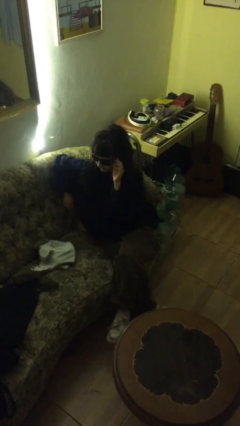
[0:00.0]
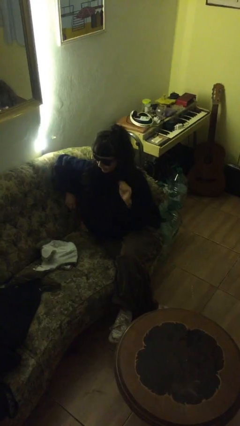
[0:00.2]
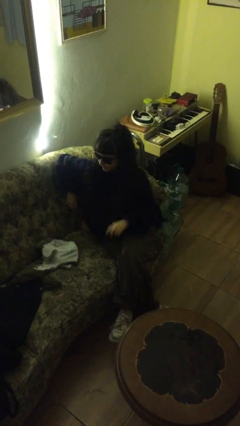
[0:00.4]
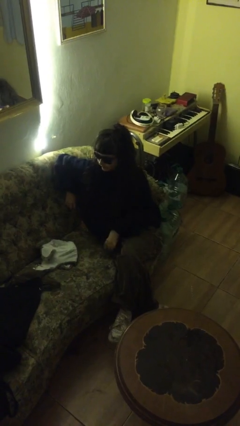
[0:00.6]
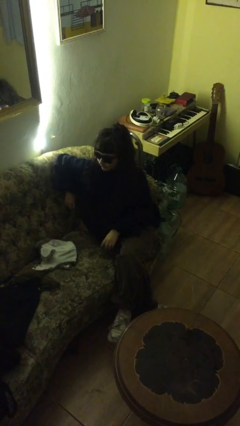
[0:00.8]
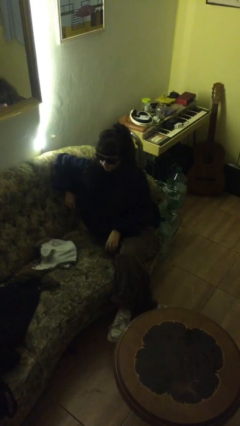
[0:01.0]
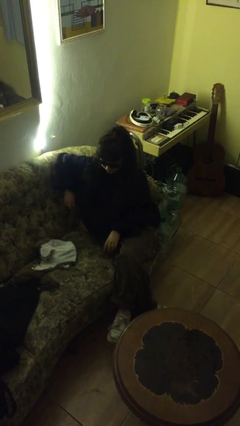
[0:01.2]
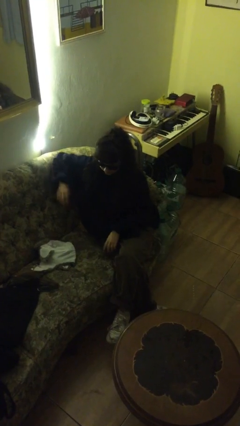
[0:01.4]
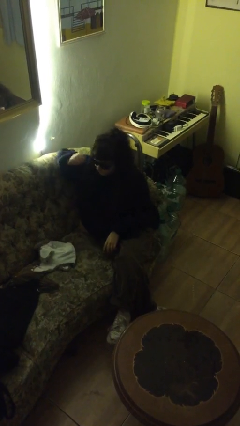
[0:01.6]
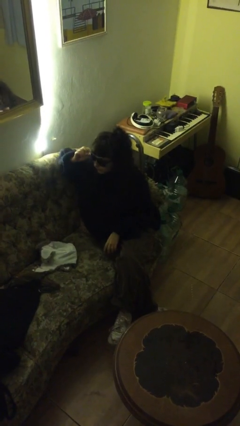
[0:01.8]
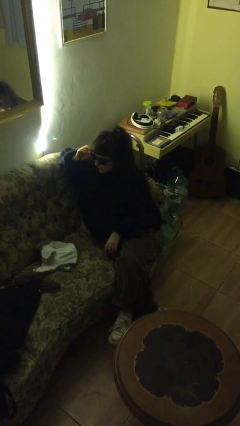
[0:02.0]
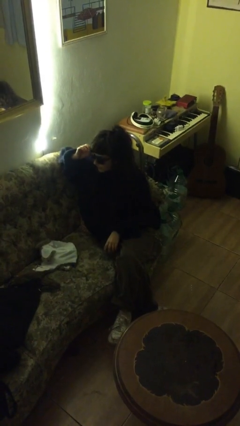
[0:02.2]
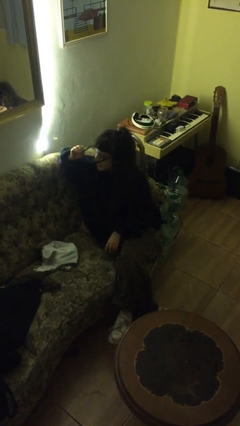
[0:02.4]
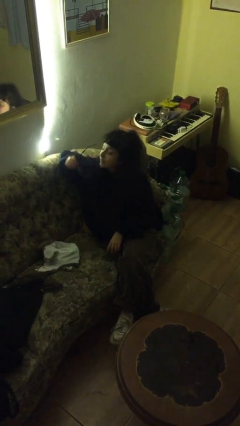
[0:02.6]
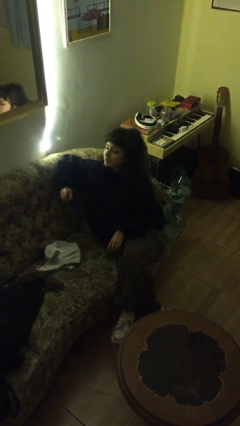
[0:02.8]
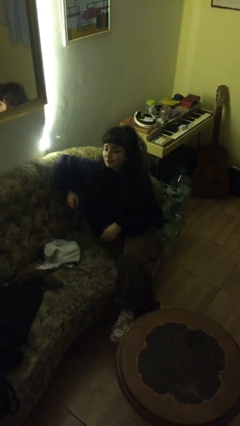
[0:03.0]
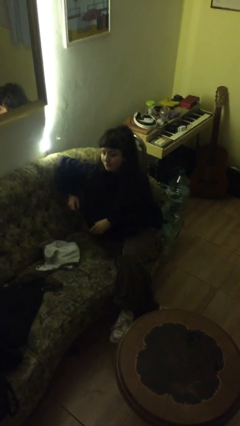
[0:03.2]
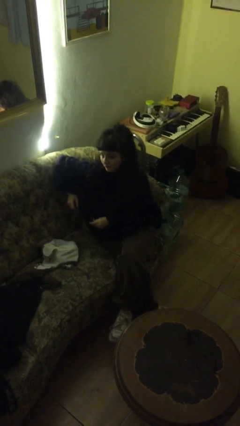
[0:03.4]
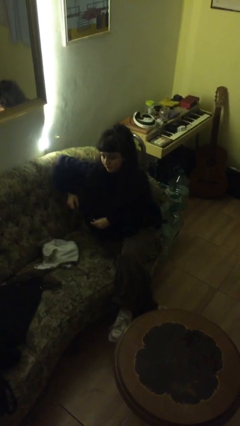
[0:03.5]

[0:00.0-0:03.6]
person takes off sunglasses

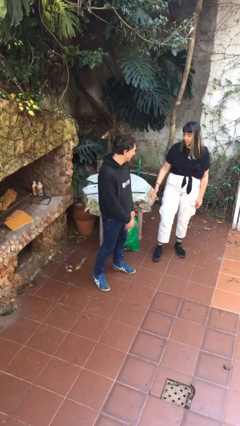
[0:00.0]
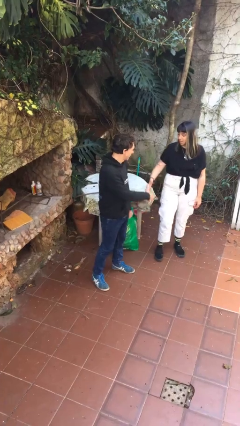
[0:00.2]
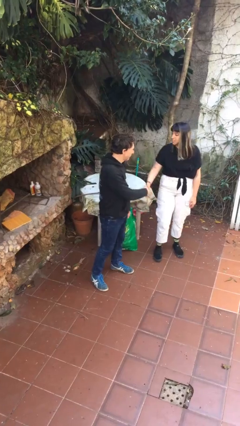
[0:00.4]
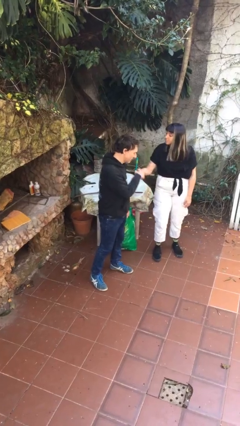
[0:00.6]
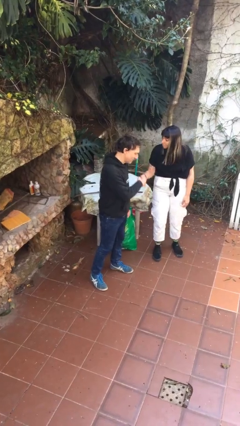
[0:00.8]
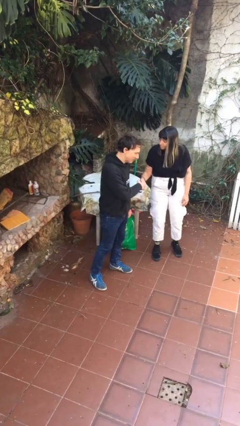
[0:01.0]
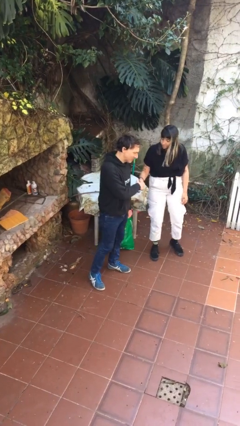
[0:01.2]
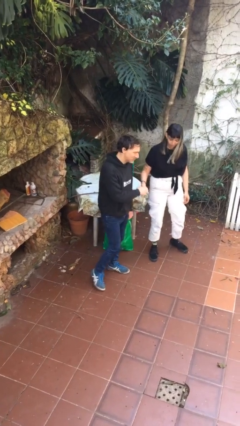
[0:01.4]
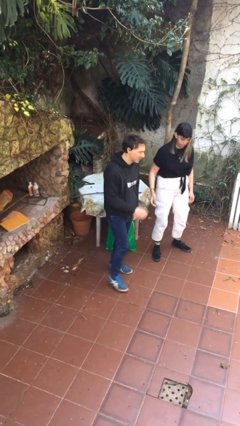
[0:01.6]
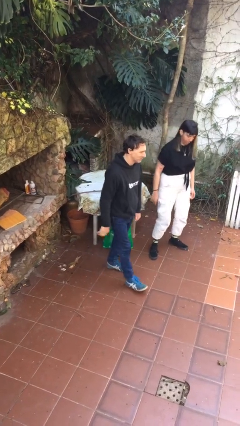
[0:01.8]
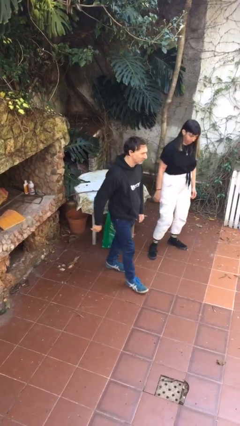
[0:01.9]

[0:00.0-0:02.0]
person shakes hand

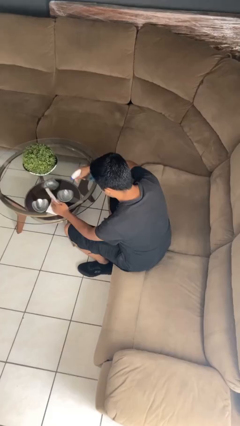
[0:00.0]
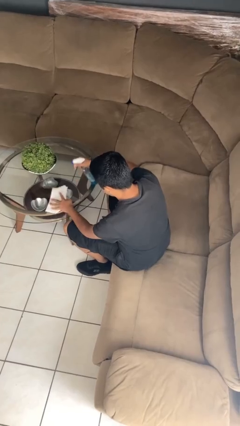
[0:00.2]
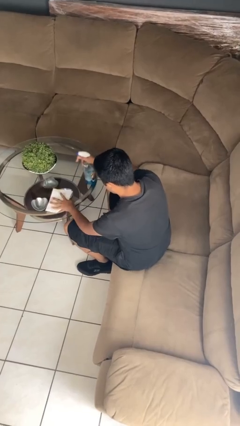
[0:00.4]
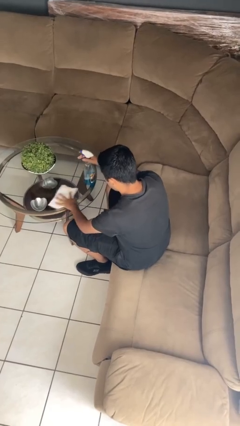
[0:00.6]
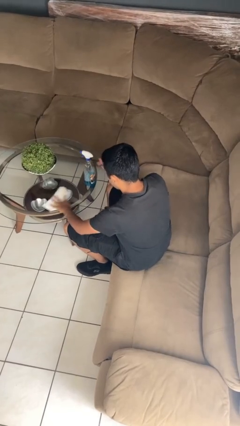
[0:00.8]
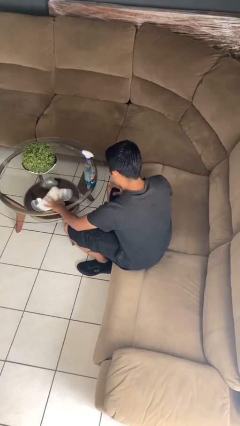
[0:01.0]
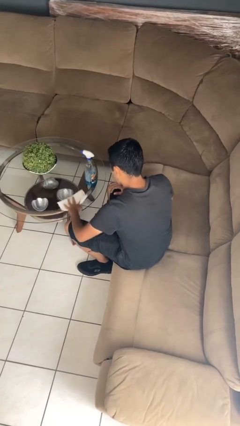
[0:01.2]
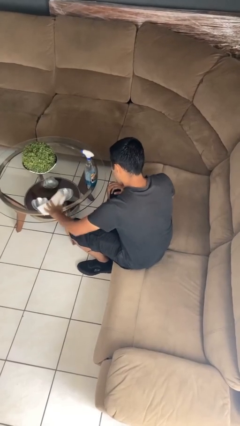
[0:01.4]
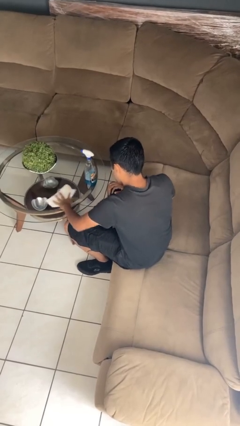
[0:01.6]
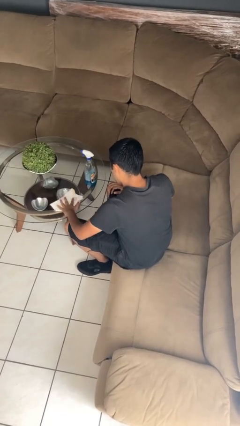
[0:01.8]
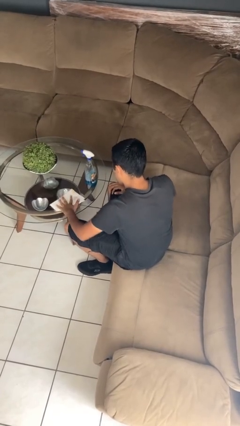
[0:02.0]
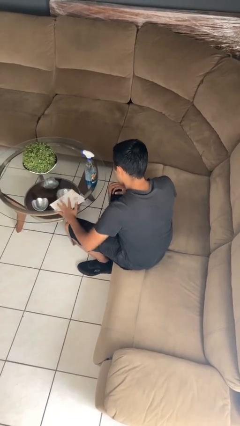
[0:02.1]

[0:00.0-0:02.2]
person cleans table with rag

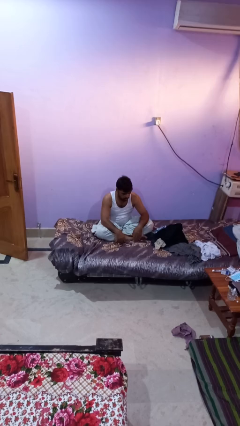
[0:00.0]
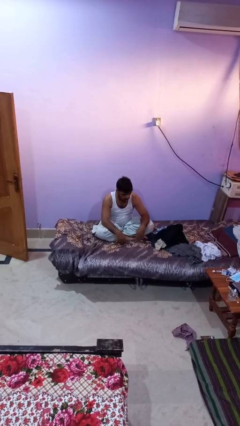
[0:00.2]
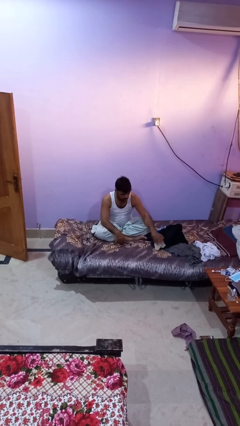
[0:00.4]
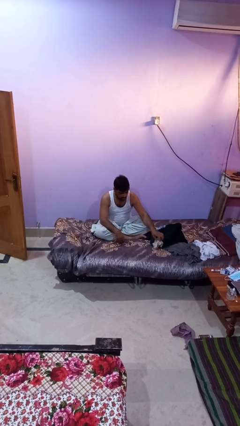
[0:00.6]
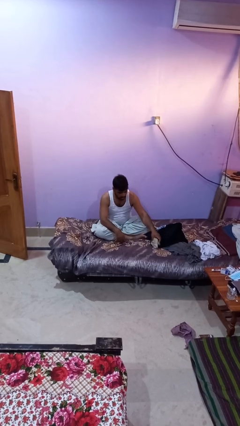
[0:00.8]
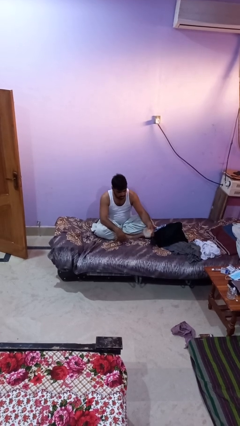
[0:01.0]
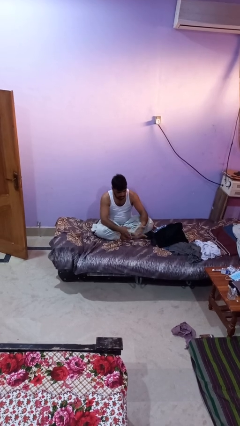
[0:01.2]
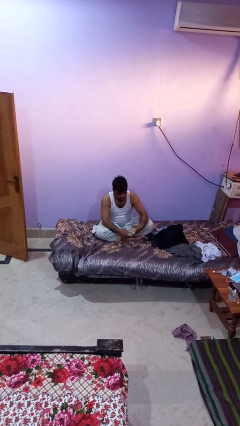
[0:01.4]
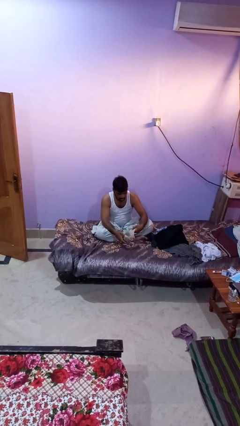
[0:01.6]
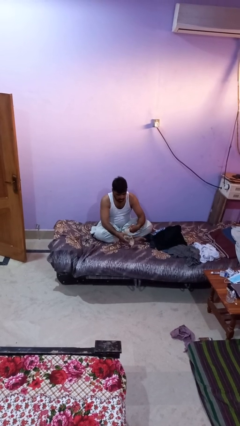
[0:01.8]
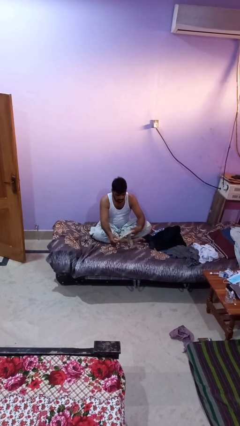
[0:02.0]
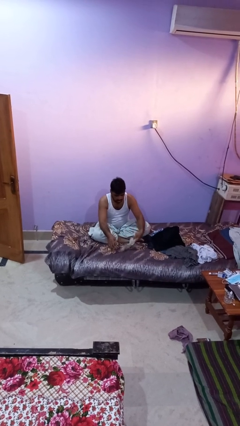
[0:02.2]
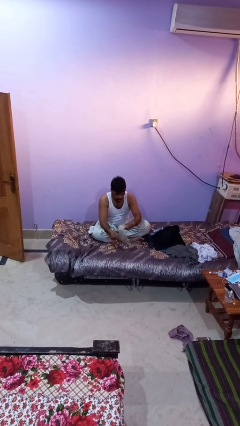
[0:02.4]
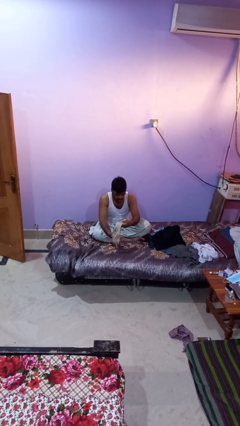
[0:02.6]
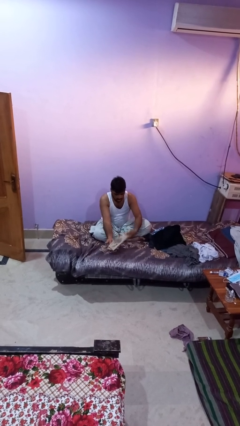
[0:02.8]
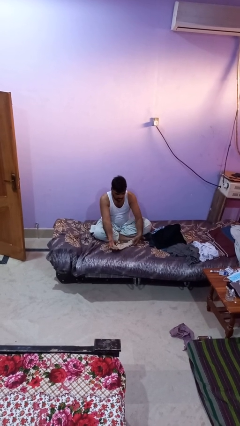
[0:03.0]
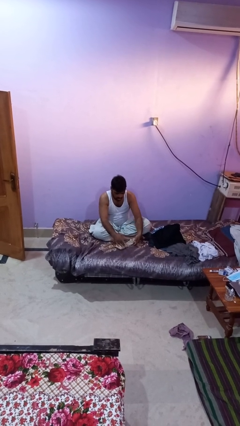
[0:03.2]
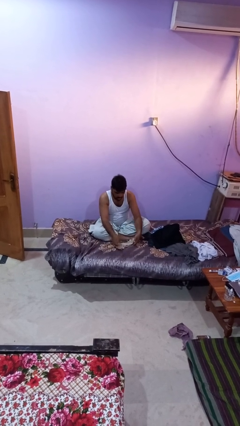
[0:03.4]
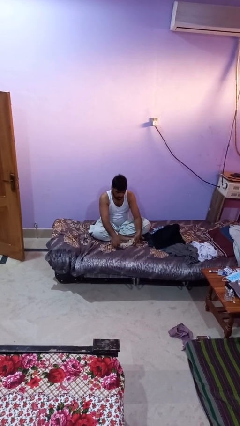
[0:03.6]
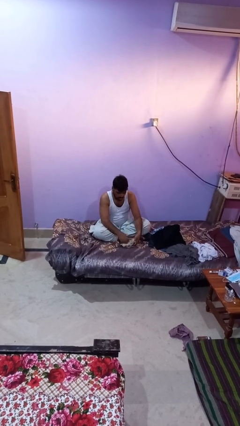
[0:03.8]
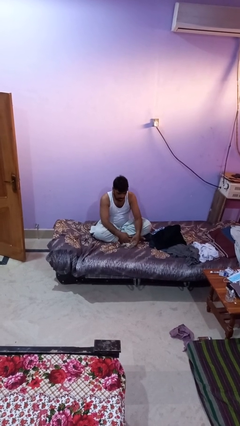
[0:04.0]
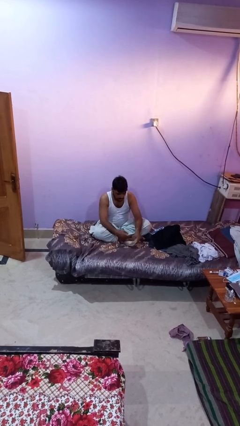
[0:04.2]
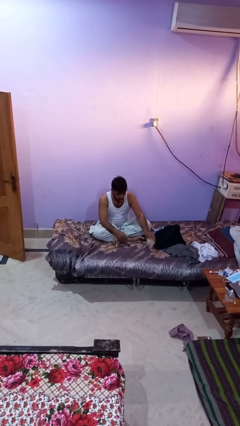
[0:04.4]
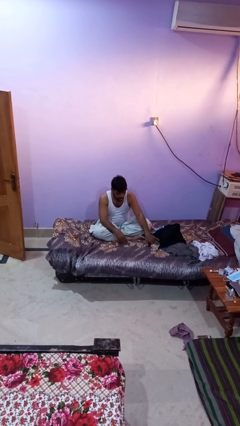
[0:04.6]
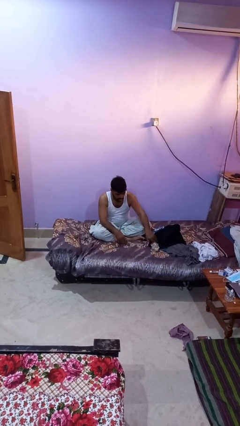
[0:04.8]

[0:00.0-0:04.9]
person folds socks

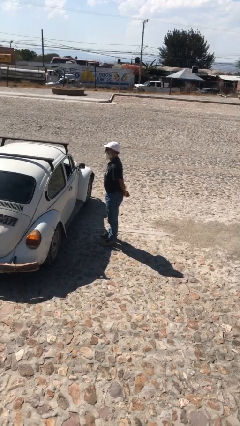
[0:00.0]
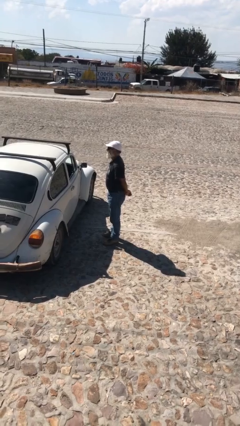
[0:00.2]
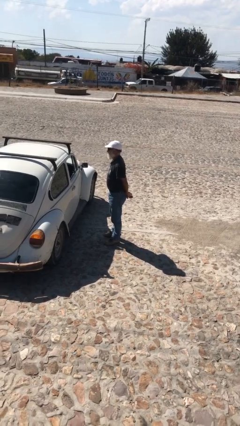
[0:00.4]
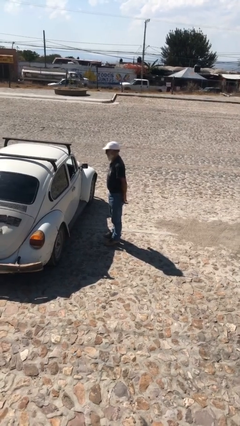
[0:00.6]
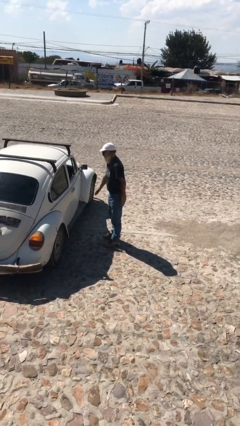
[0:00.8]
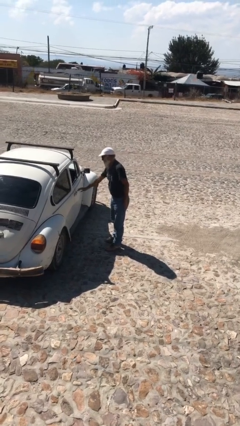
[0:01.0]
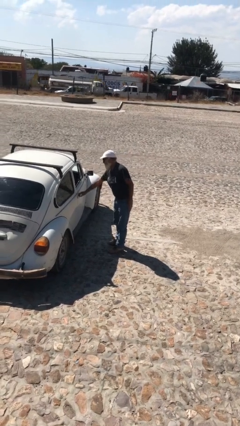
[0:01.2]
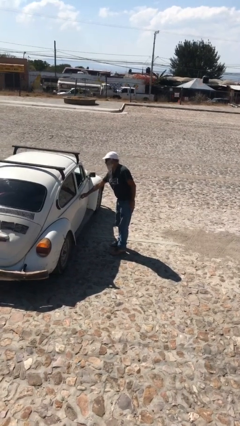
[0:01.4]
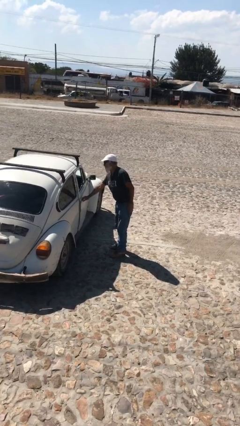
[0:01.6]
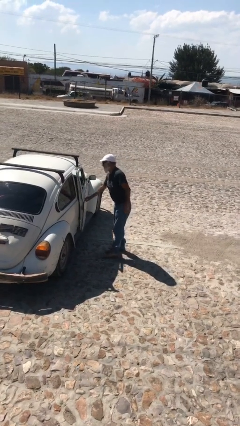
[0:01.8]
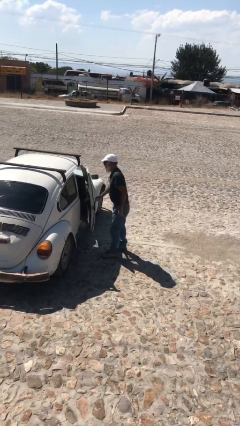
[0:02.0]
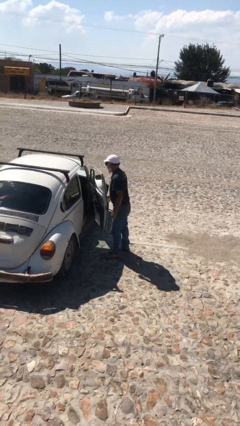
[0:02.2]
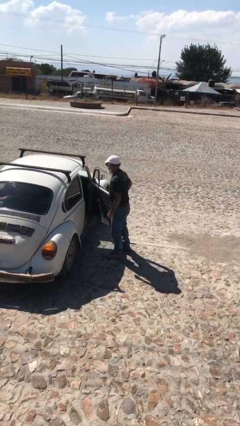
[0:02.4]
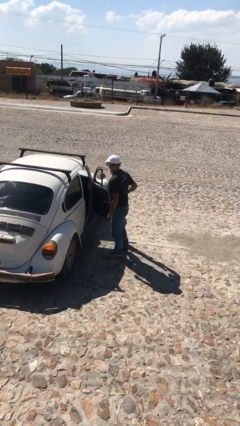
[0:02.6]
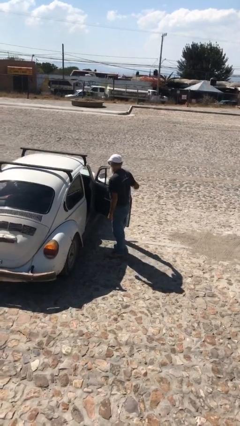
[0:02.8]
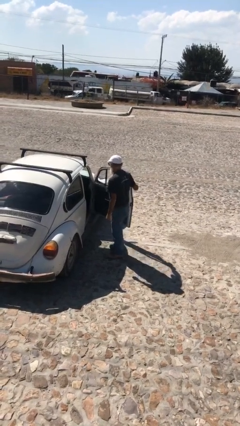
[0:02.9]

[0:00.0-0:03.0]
person opens car door

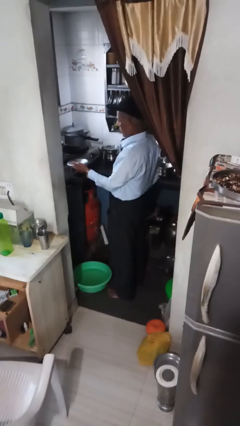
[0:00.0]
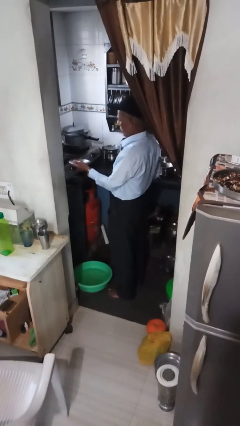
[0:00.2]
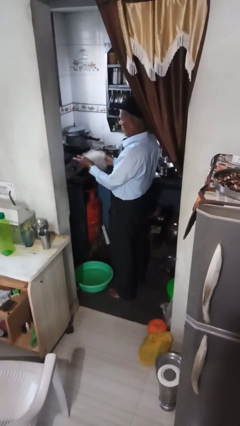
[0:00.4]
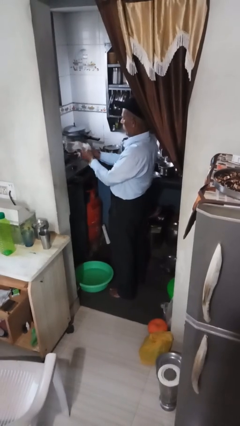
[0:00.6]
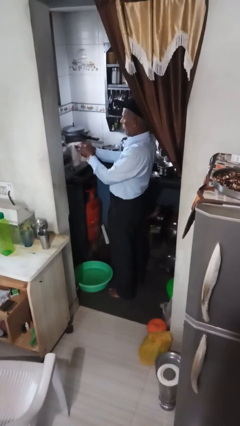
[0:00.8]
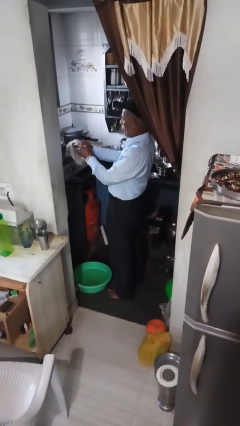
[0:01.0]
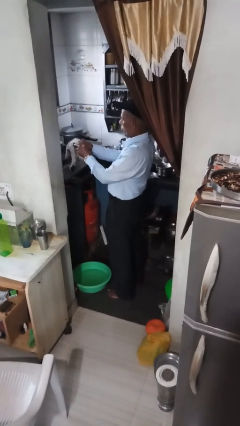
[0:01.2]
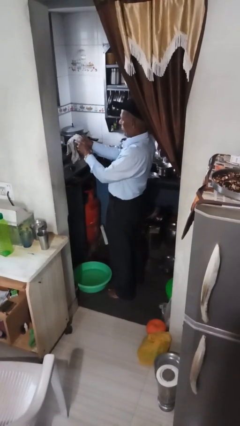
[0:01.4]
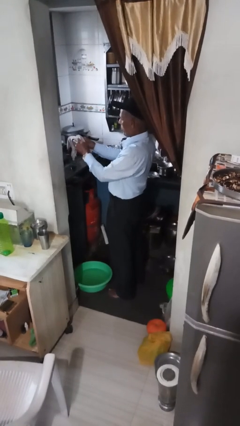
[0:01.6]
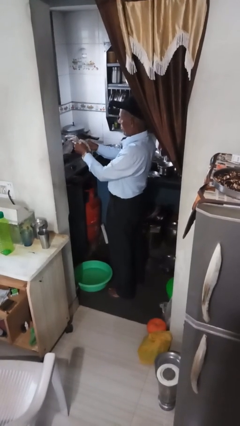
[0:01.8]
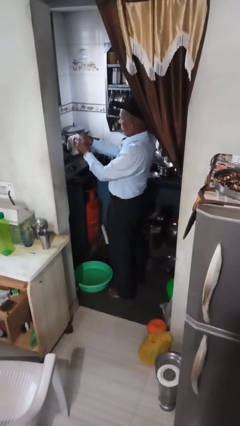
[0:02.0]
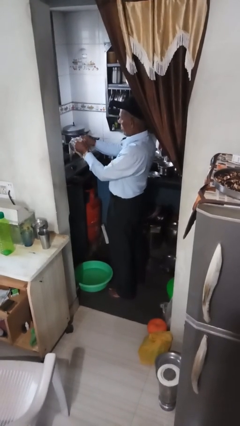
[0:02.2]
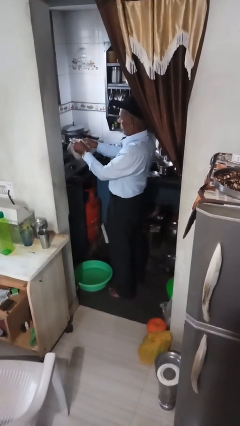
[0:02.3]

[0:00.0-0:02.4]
person dries dish
